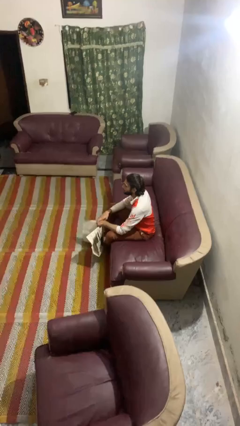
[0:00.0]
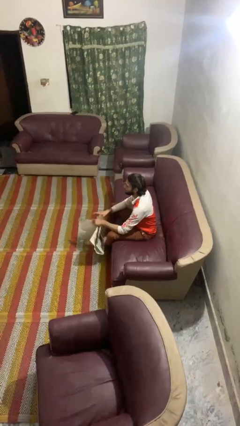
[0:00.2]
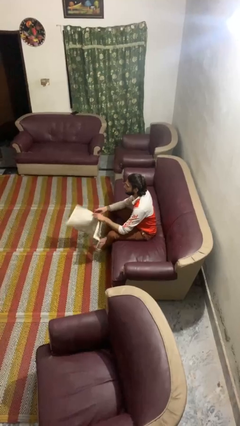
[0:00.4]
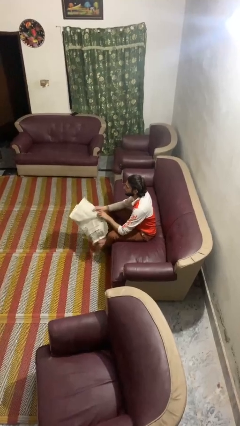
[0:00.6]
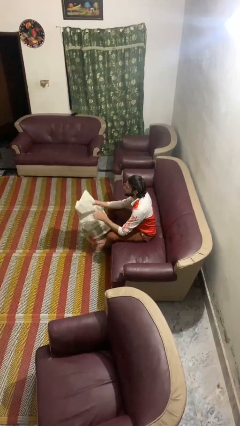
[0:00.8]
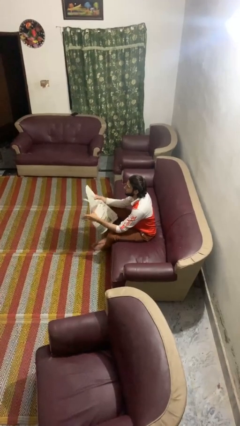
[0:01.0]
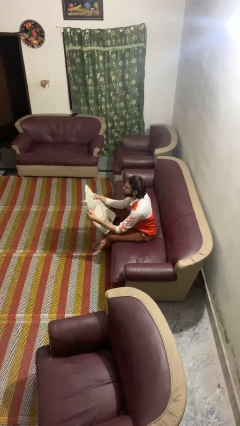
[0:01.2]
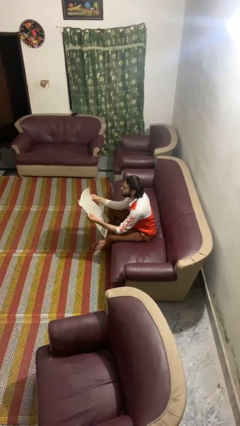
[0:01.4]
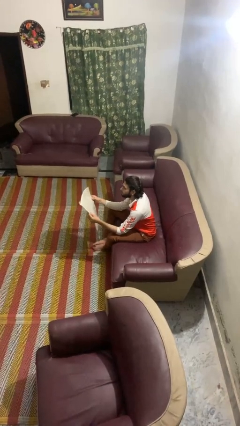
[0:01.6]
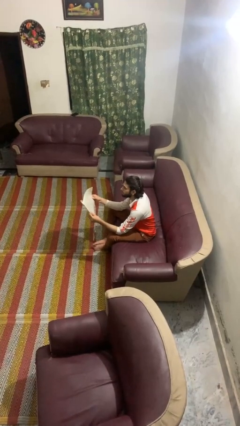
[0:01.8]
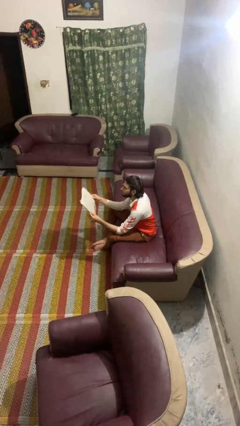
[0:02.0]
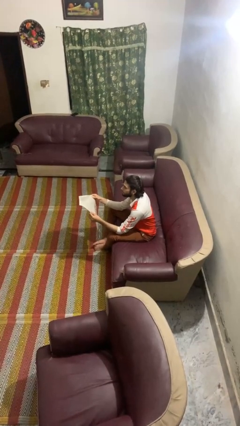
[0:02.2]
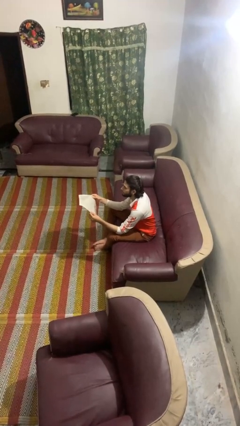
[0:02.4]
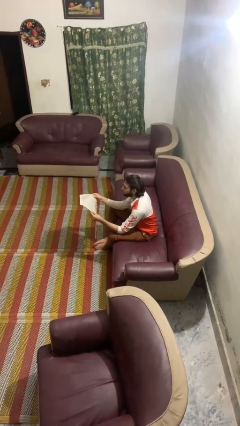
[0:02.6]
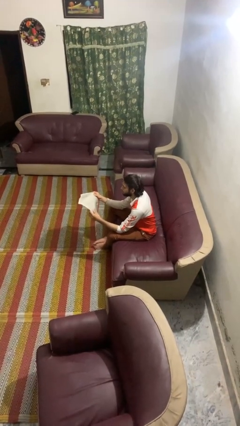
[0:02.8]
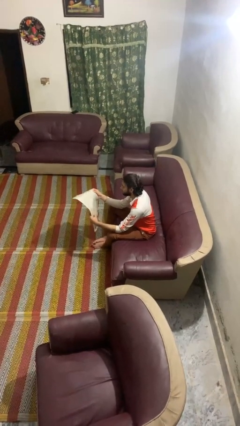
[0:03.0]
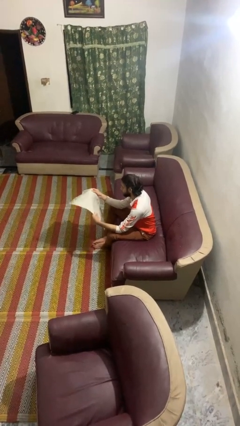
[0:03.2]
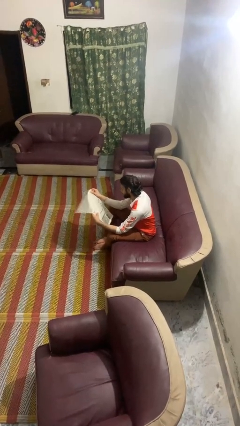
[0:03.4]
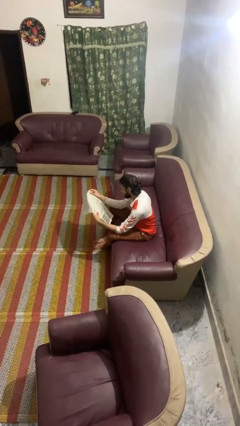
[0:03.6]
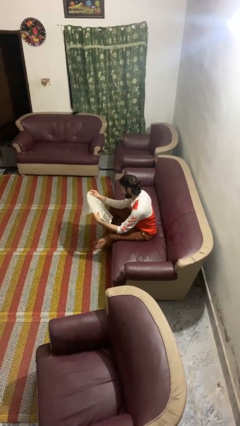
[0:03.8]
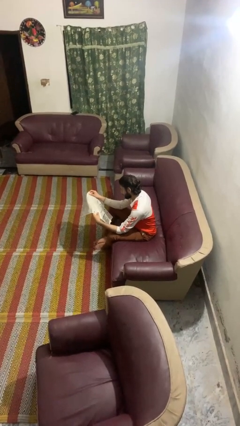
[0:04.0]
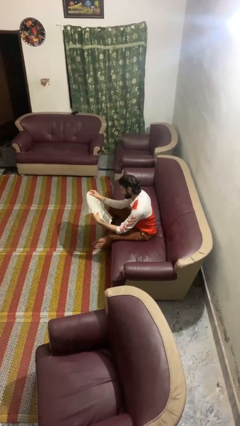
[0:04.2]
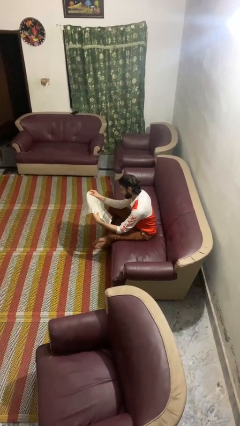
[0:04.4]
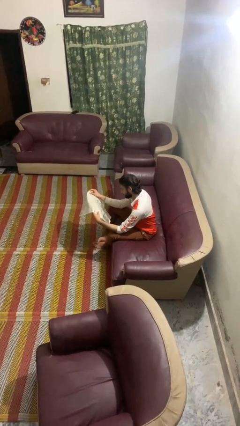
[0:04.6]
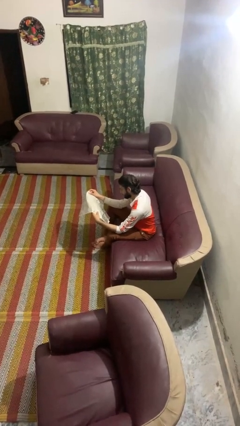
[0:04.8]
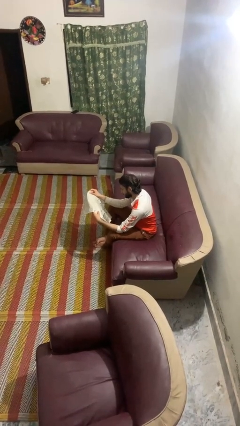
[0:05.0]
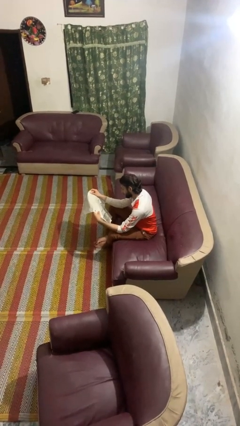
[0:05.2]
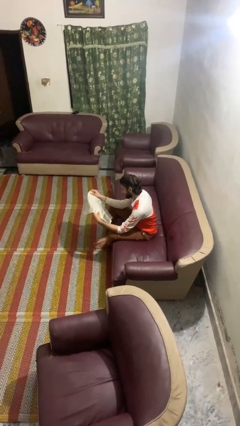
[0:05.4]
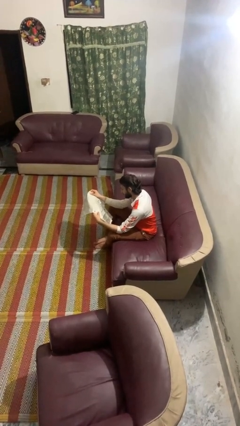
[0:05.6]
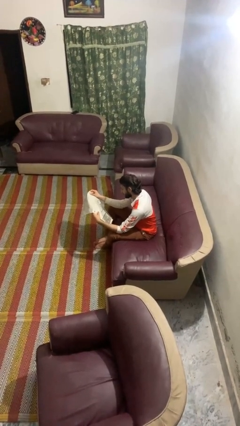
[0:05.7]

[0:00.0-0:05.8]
person reads newspaper

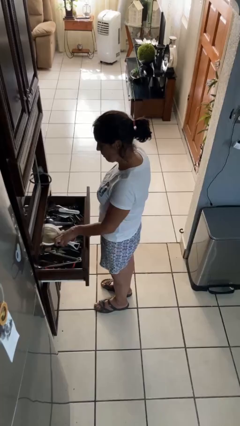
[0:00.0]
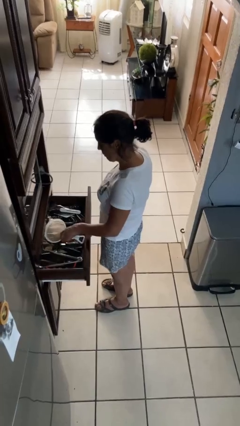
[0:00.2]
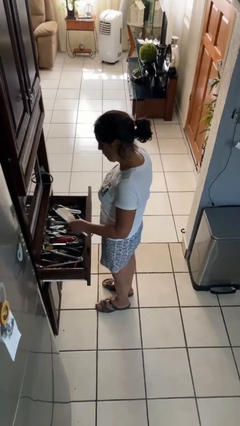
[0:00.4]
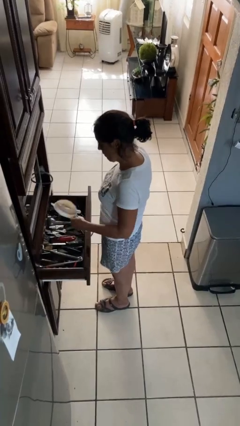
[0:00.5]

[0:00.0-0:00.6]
person takes object from kitchen drawer

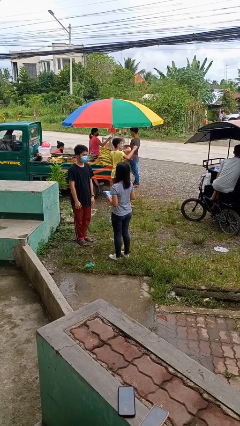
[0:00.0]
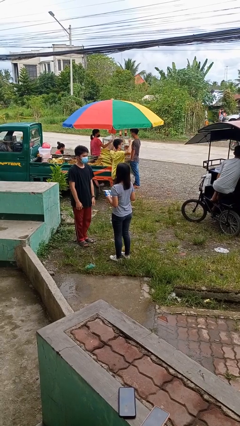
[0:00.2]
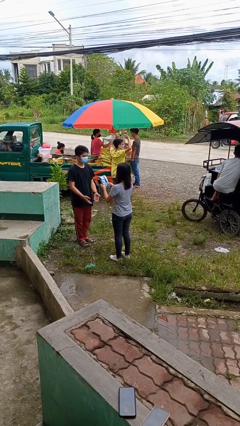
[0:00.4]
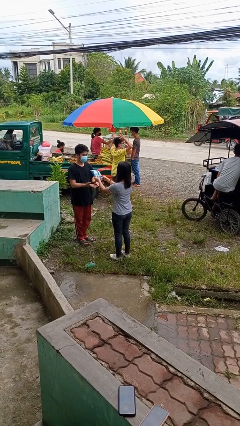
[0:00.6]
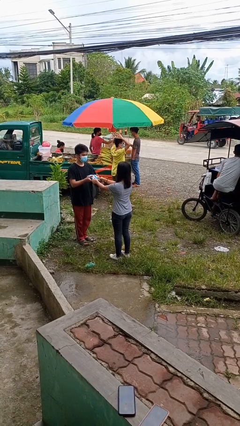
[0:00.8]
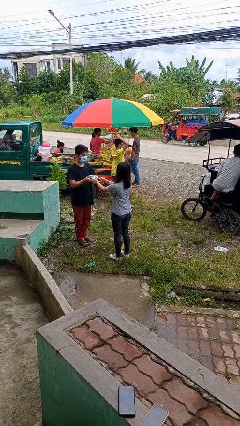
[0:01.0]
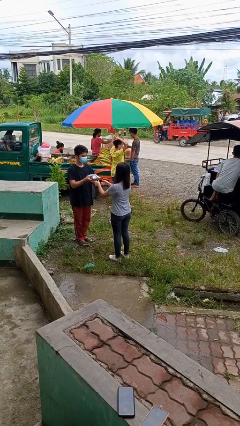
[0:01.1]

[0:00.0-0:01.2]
person transfers object to person

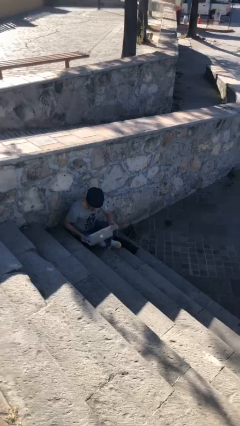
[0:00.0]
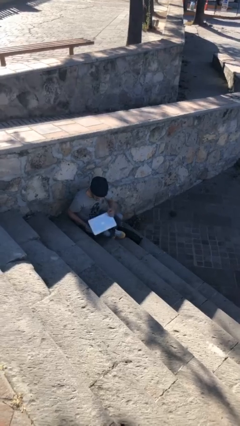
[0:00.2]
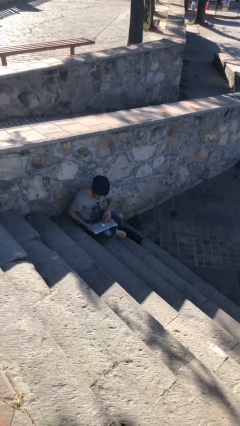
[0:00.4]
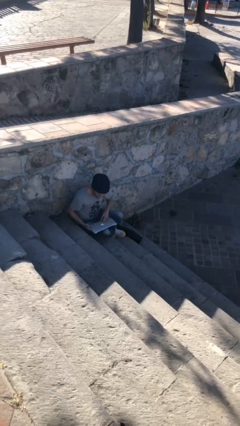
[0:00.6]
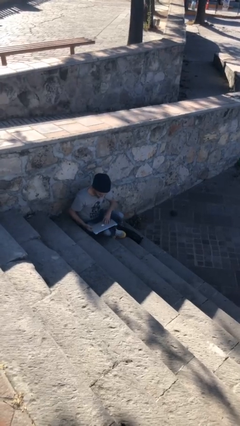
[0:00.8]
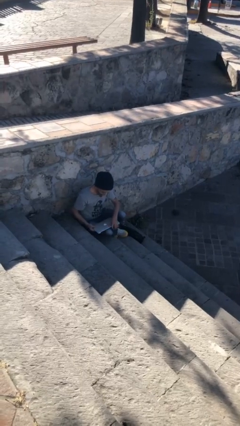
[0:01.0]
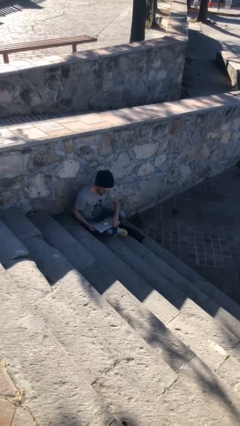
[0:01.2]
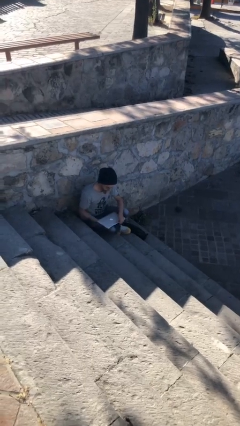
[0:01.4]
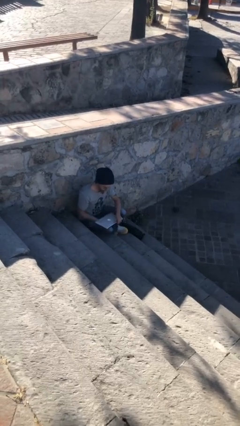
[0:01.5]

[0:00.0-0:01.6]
person interacts with laptop

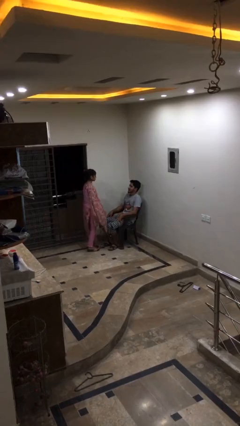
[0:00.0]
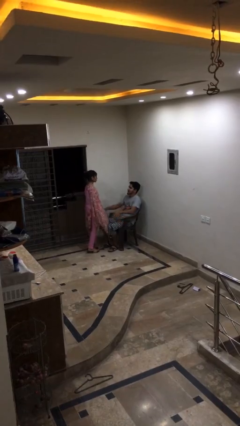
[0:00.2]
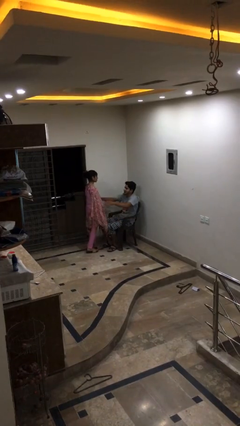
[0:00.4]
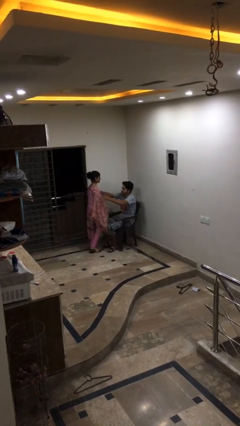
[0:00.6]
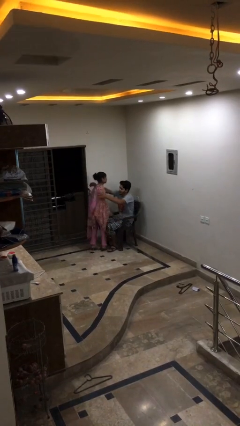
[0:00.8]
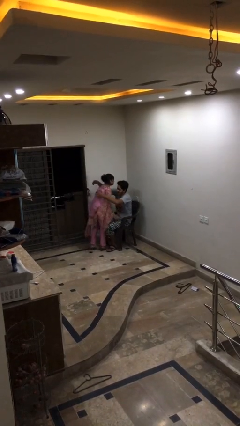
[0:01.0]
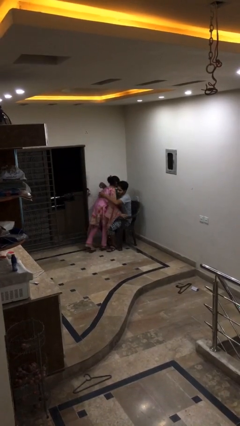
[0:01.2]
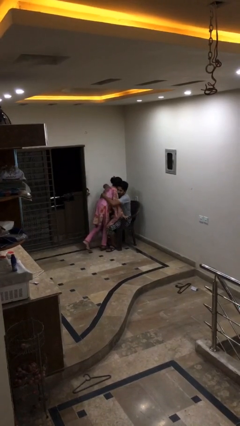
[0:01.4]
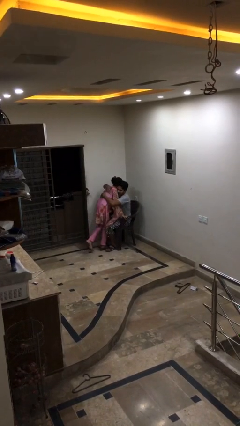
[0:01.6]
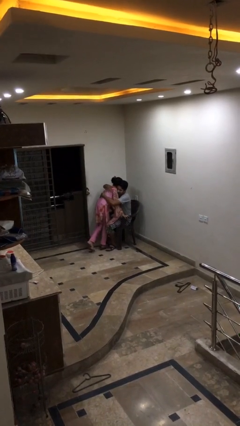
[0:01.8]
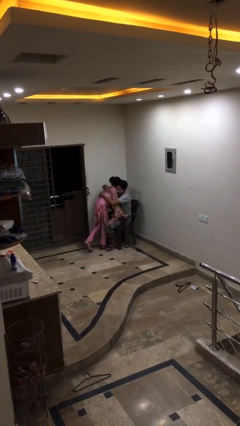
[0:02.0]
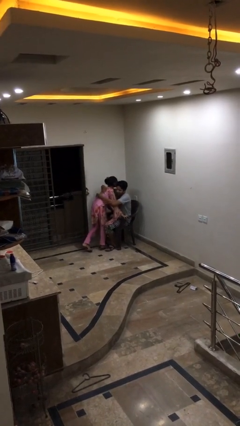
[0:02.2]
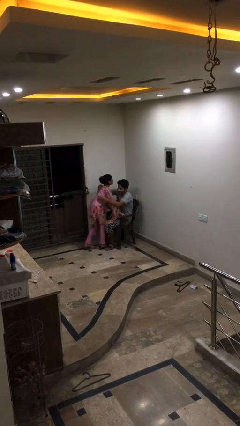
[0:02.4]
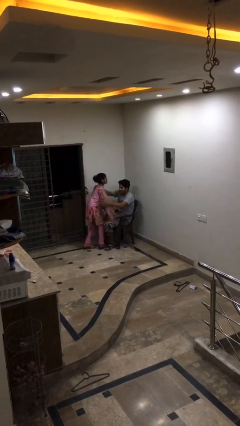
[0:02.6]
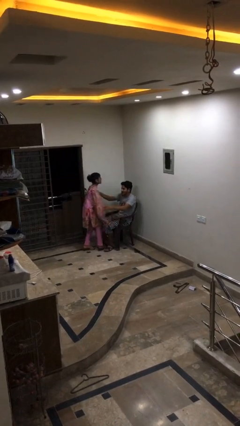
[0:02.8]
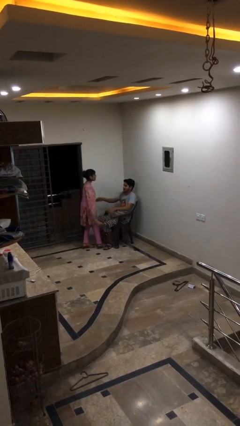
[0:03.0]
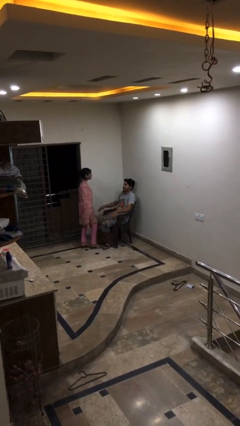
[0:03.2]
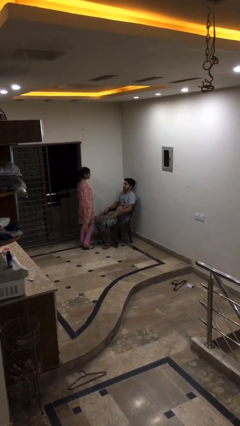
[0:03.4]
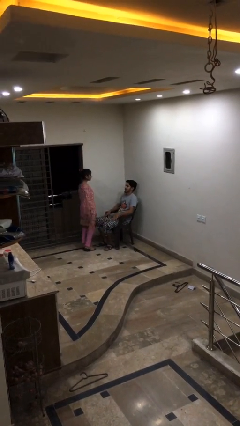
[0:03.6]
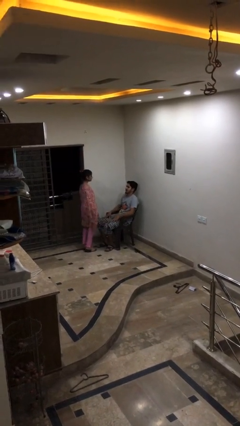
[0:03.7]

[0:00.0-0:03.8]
person embraces person

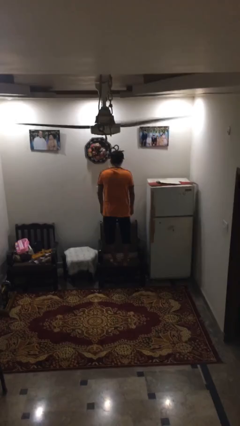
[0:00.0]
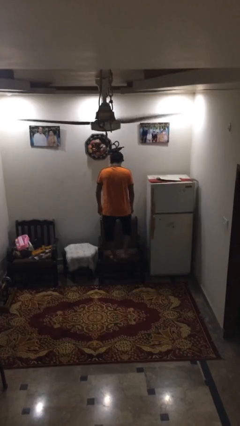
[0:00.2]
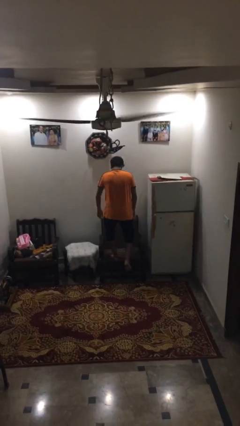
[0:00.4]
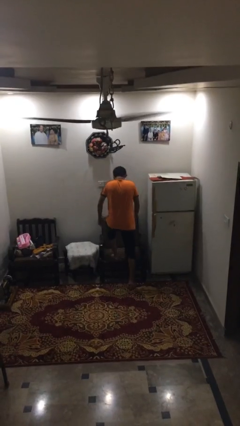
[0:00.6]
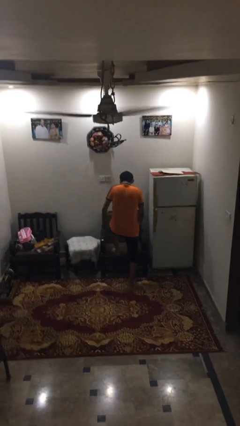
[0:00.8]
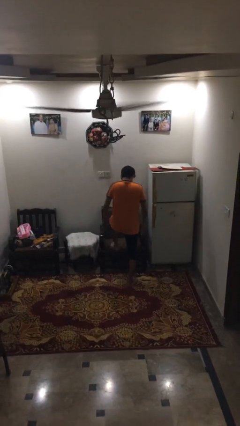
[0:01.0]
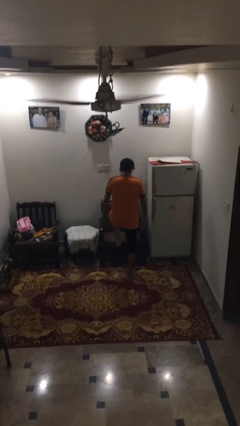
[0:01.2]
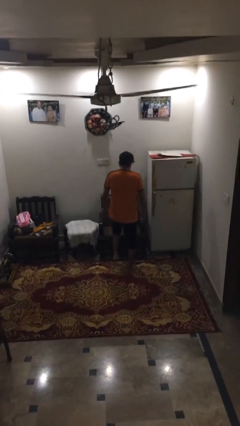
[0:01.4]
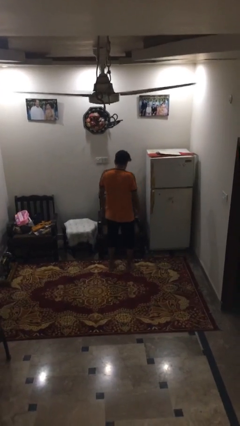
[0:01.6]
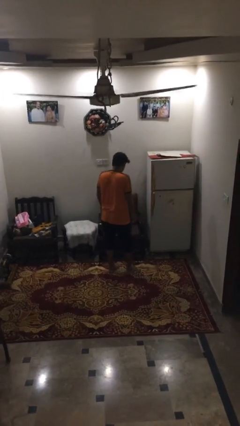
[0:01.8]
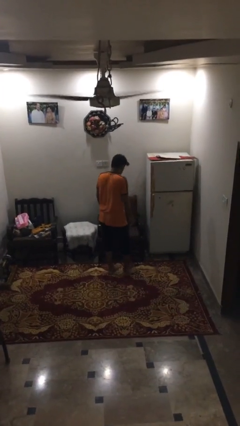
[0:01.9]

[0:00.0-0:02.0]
person climbs off couch

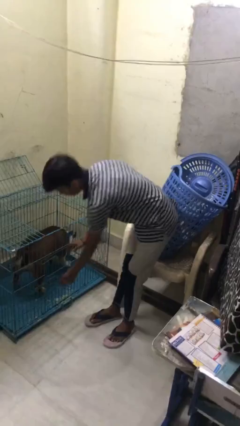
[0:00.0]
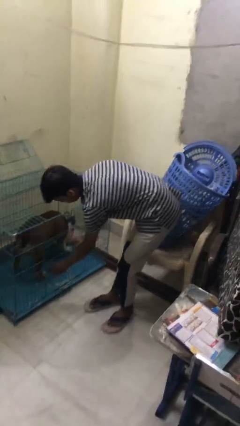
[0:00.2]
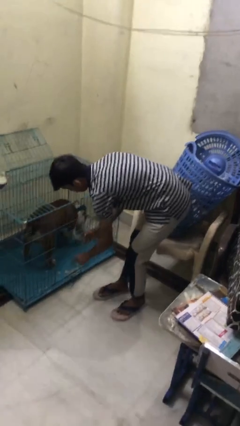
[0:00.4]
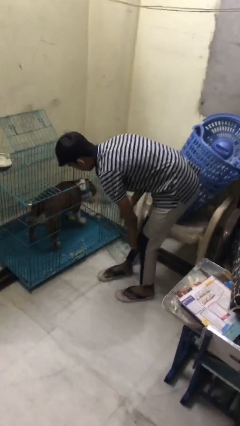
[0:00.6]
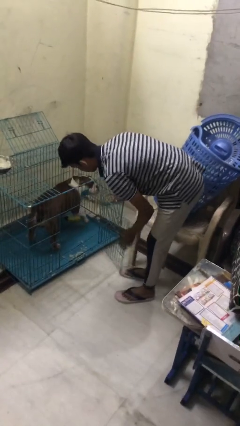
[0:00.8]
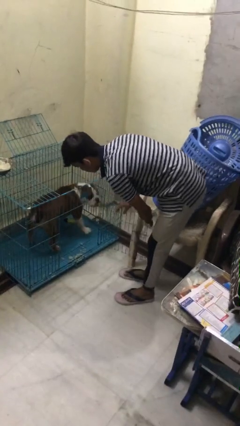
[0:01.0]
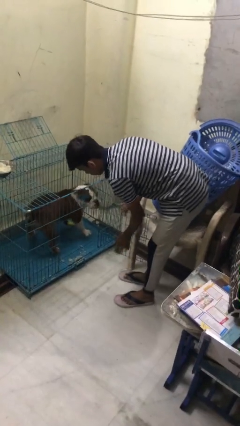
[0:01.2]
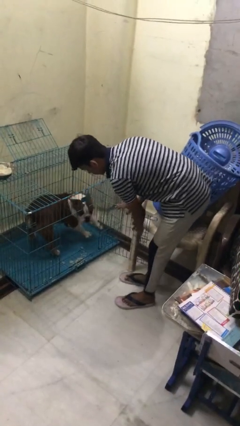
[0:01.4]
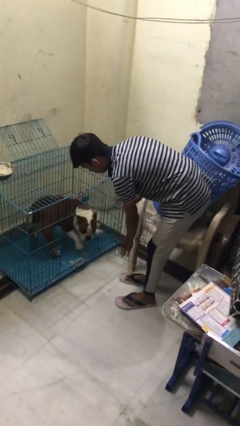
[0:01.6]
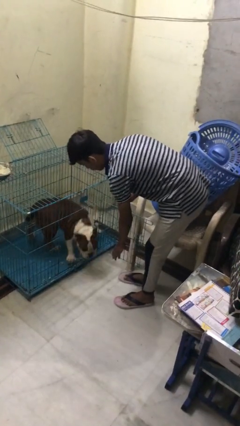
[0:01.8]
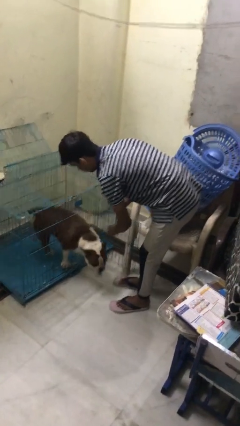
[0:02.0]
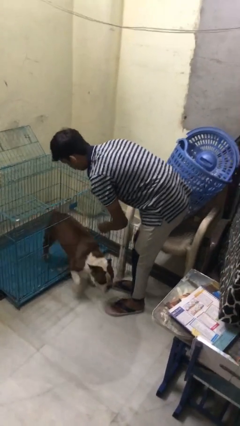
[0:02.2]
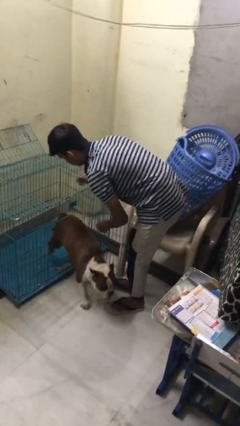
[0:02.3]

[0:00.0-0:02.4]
person uncrates dog
